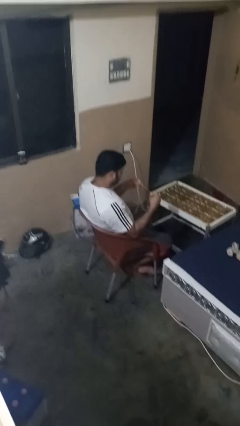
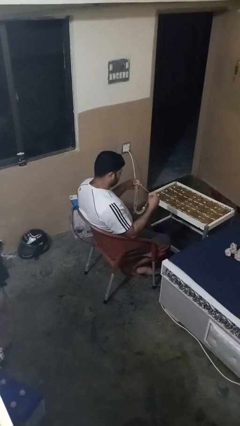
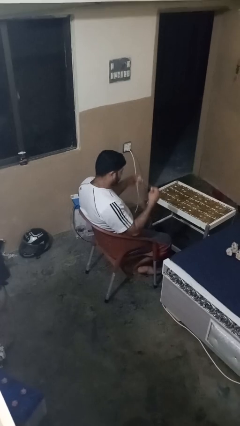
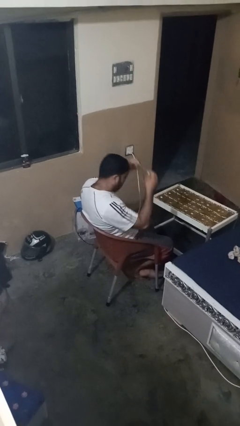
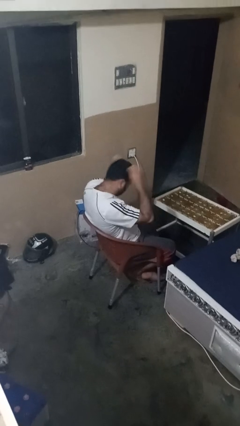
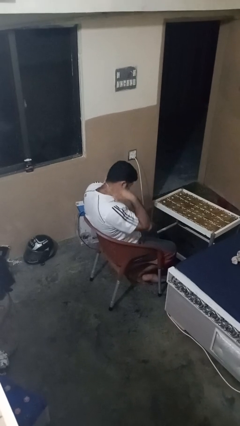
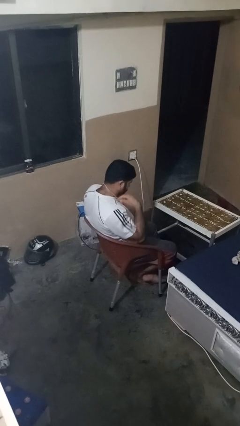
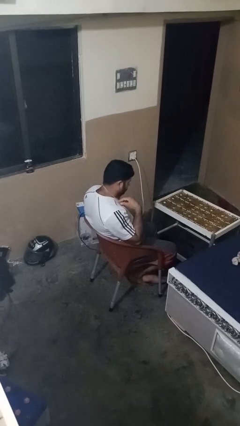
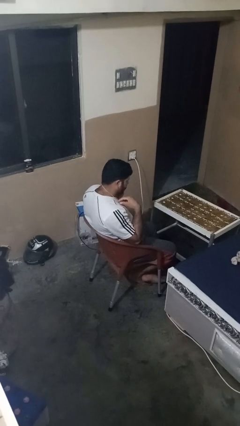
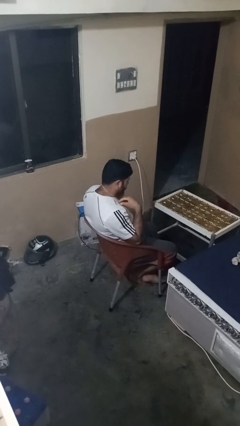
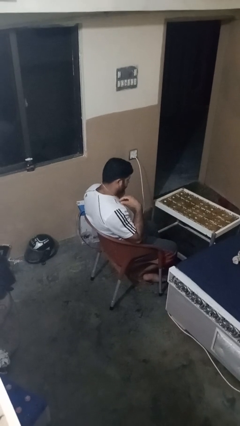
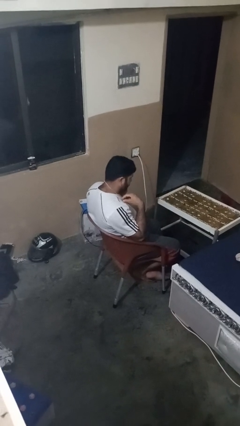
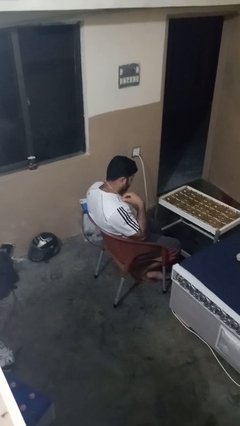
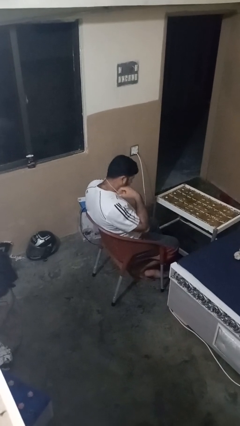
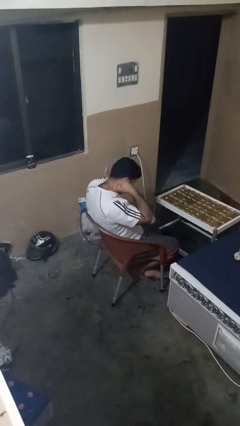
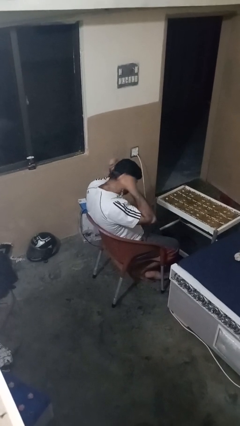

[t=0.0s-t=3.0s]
person puts on necklace

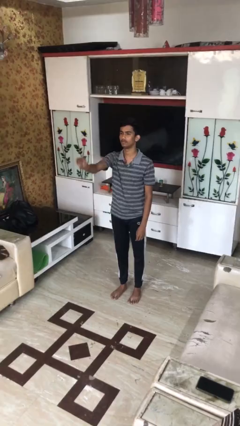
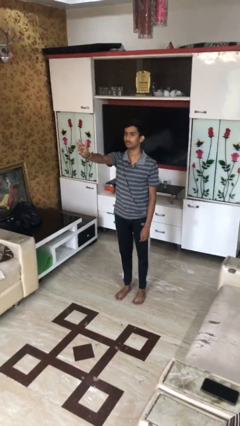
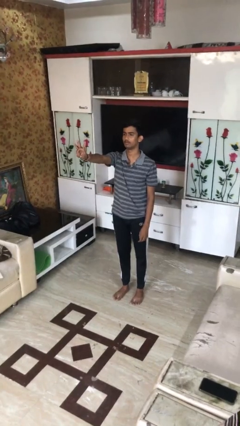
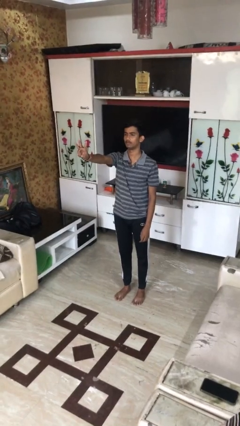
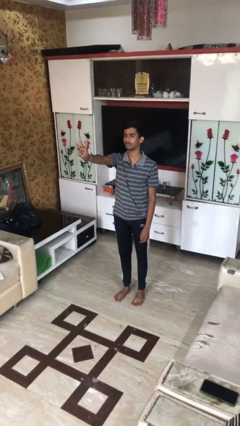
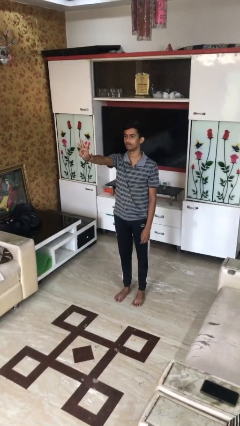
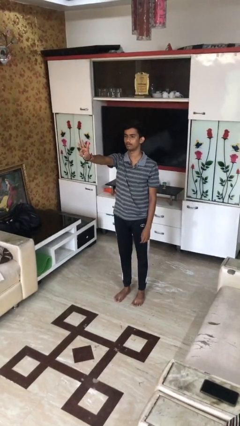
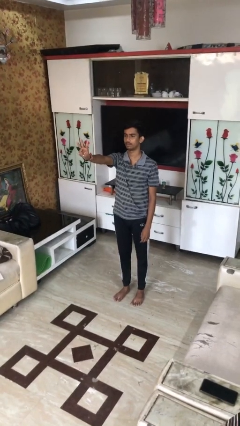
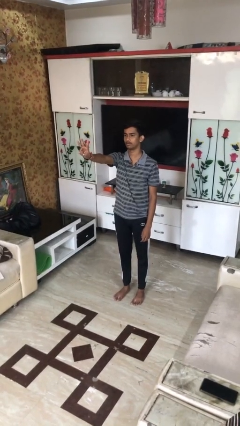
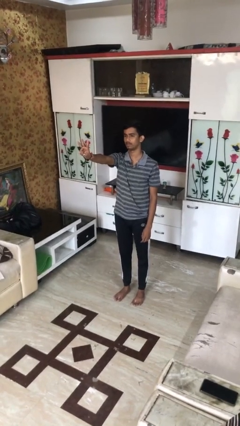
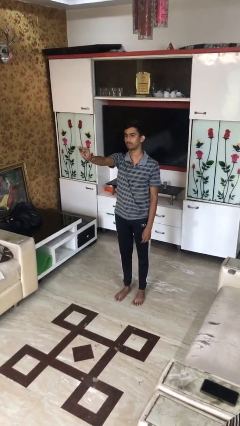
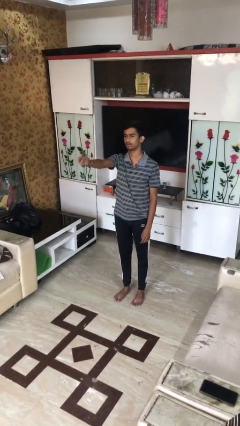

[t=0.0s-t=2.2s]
person gestures number three

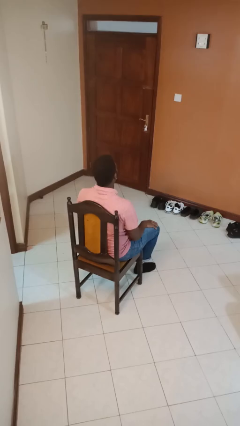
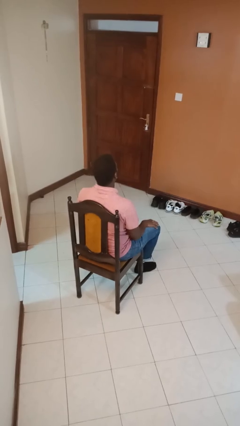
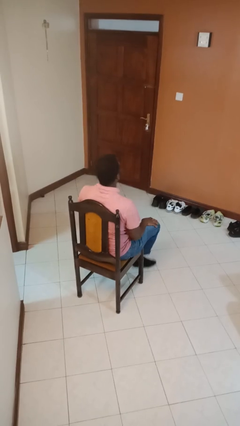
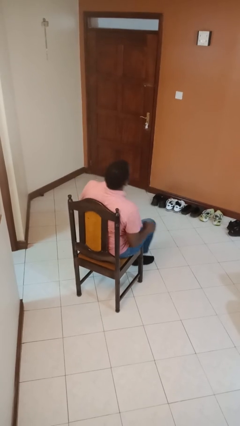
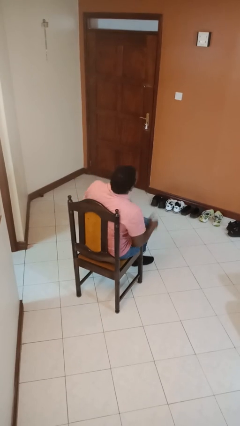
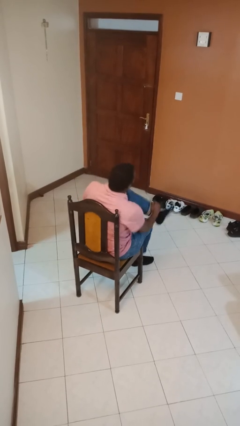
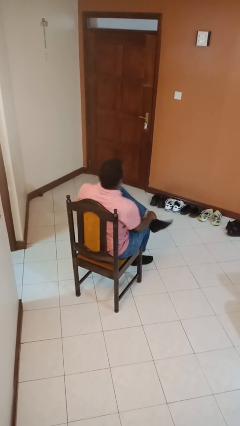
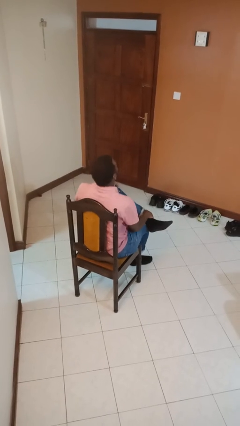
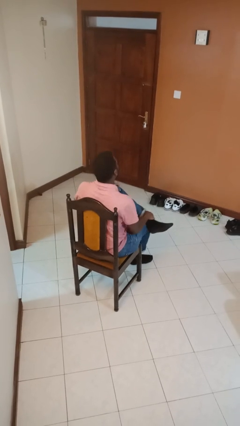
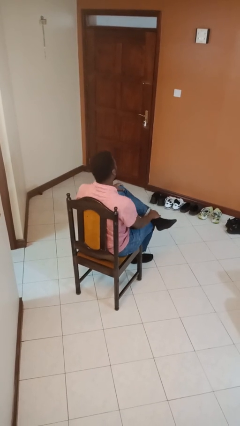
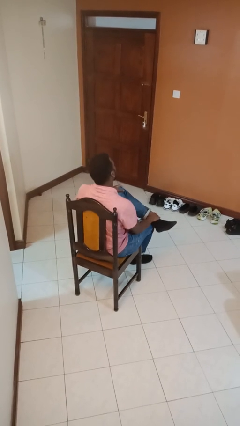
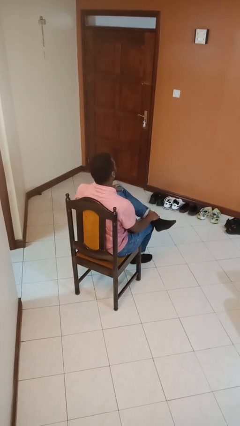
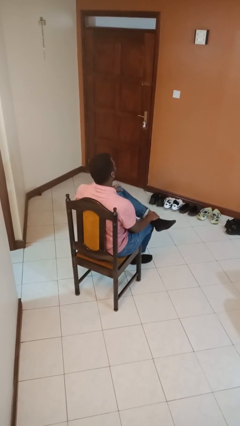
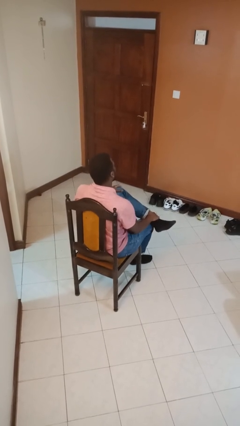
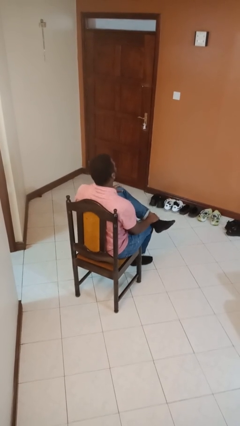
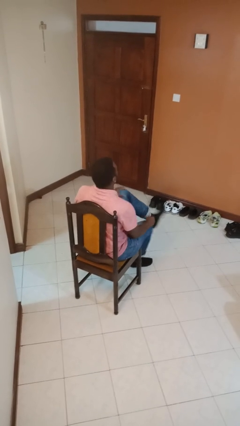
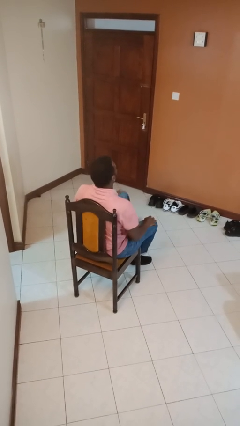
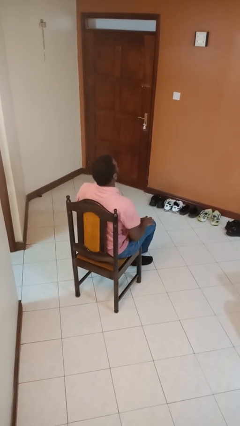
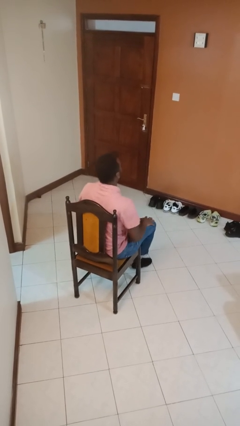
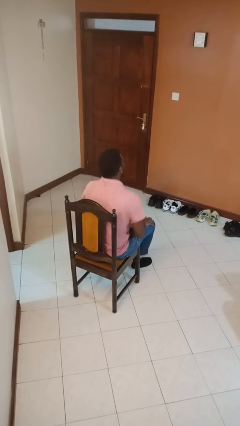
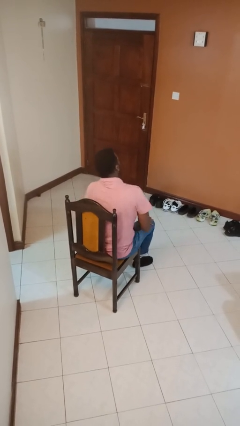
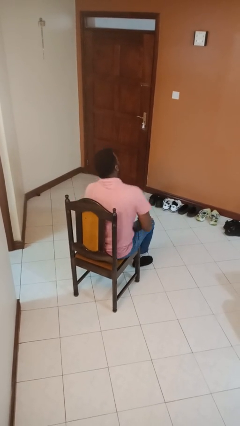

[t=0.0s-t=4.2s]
person crosses legs

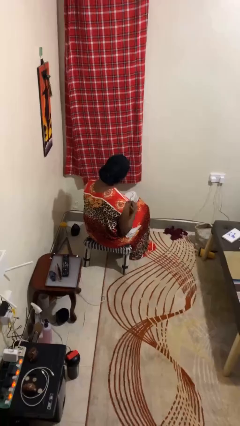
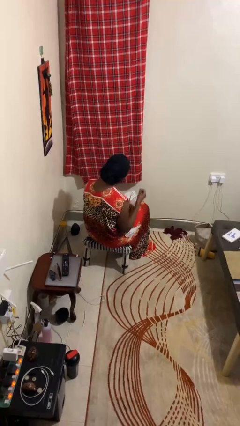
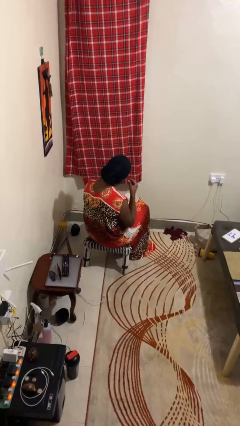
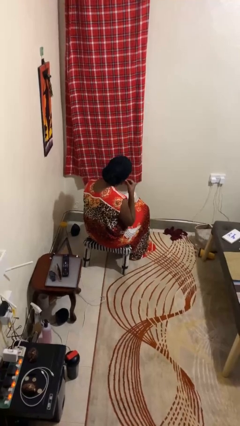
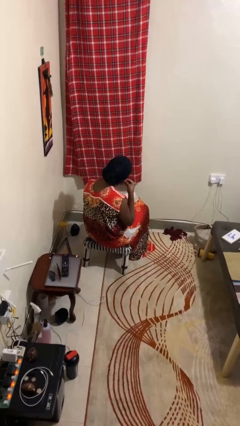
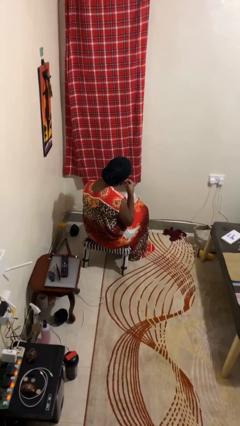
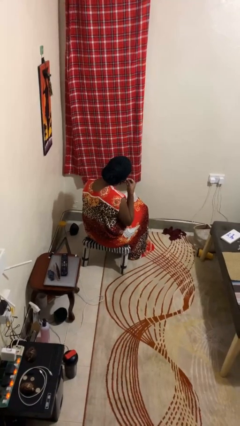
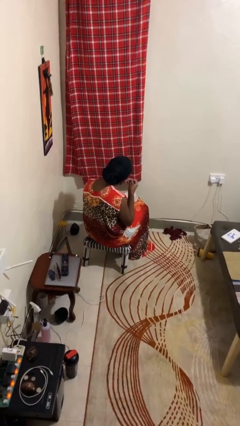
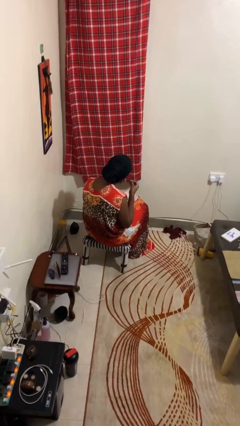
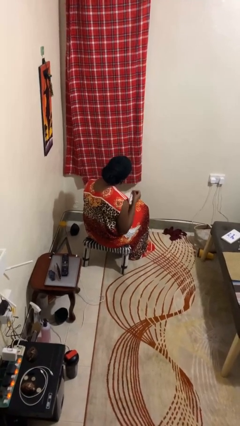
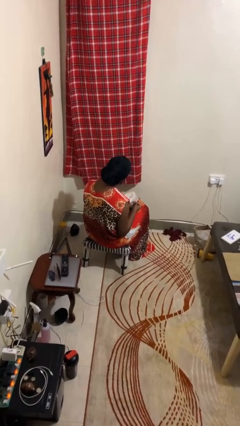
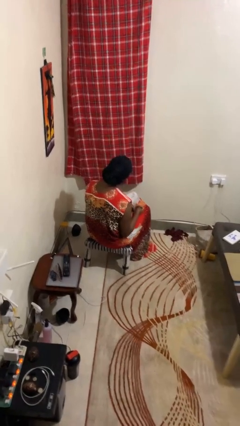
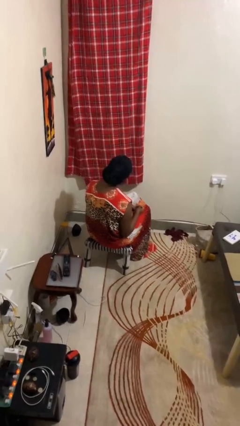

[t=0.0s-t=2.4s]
person takes off earrings

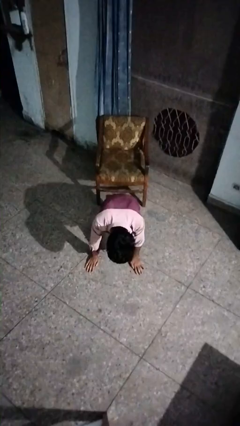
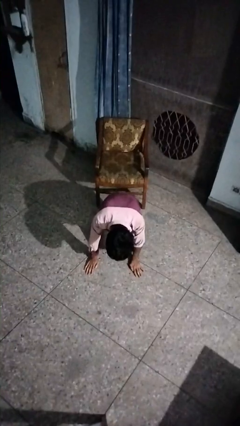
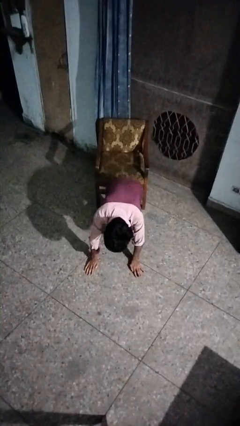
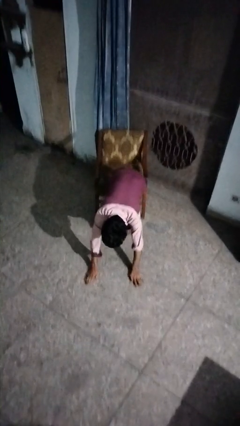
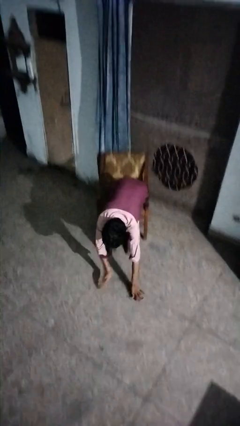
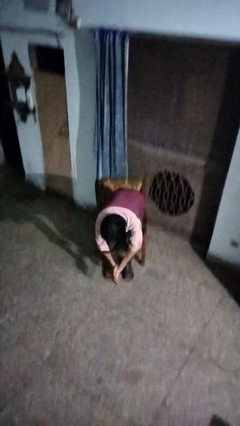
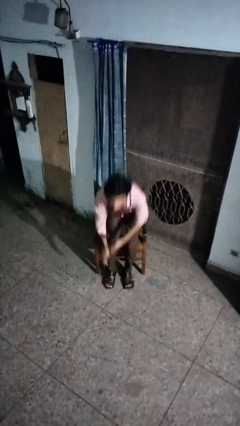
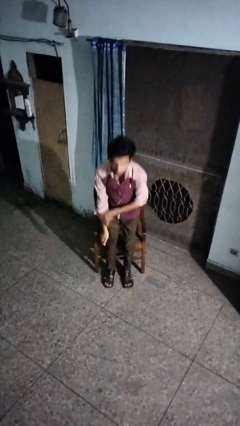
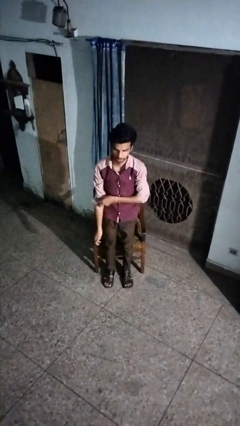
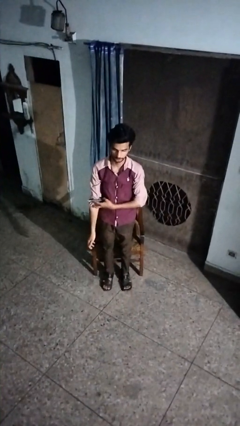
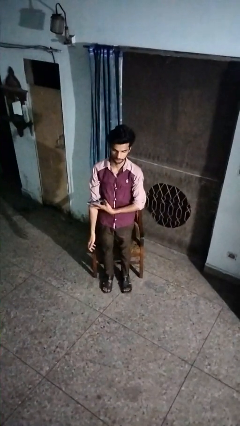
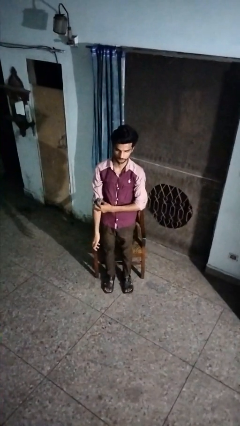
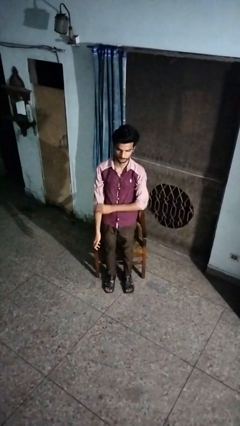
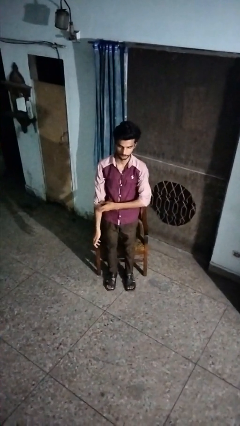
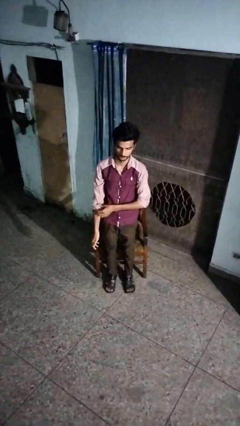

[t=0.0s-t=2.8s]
person stands up from floor

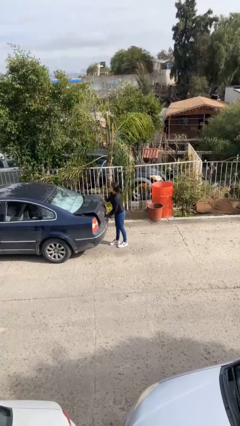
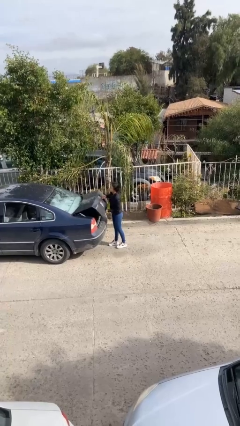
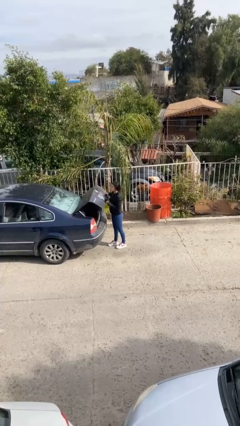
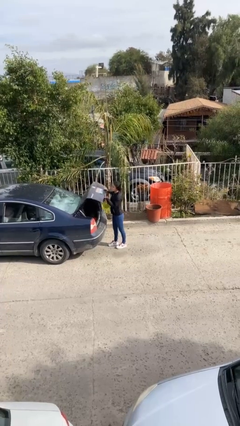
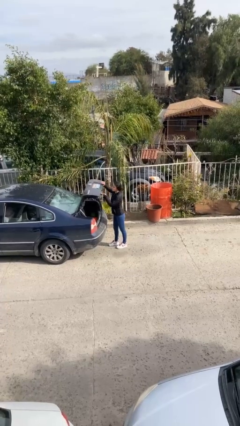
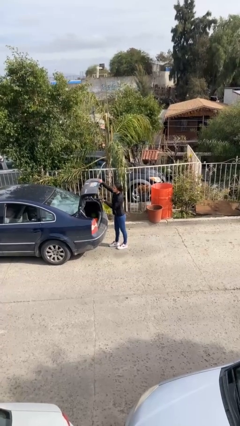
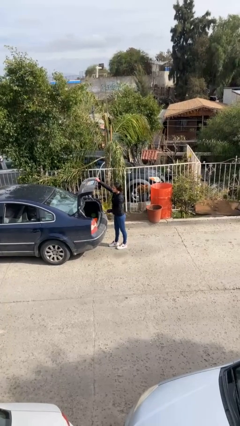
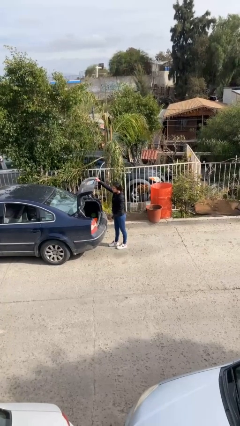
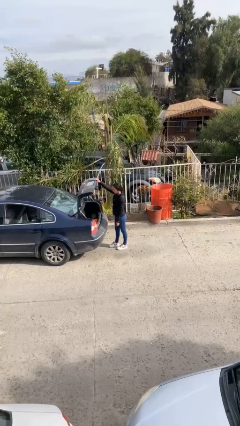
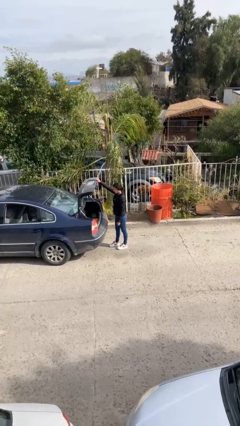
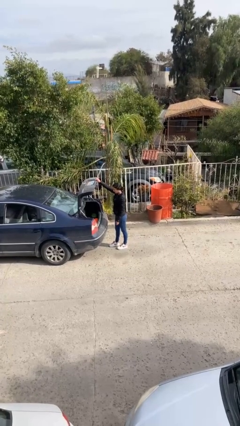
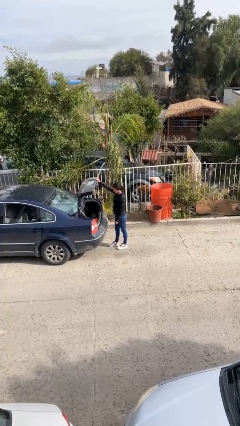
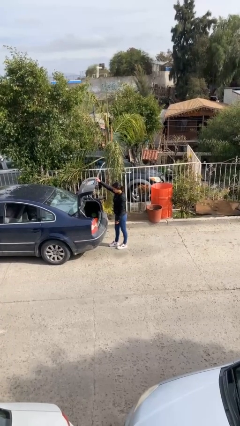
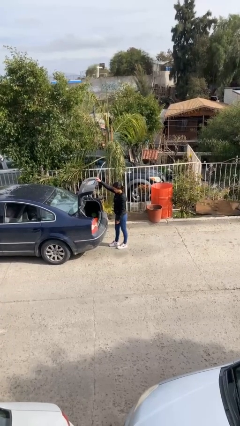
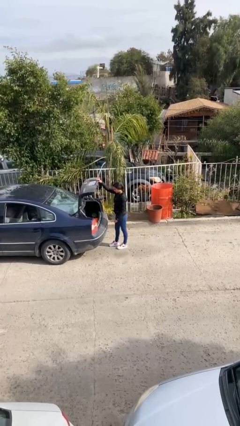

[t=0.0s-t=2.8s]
person opens car trunk
